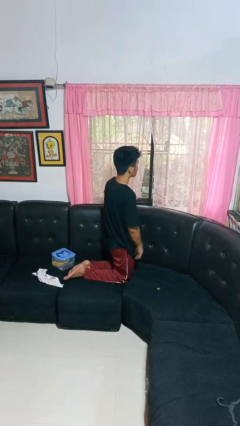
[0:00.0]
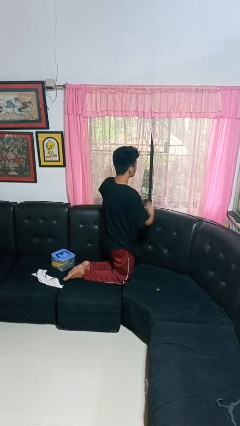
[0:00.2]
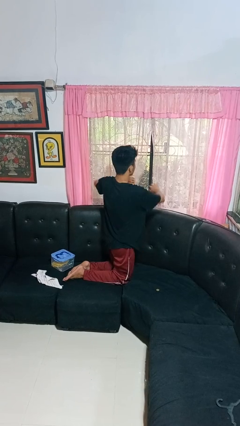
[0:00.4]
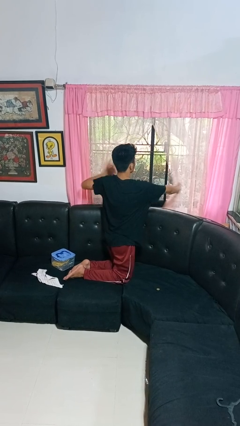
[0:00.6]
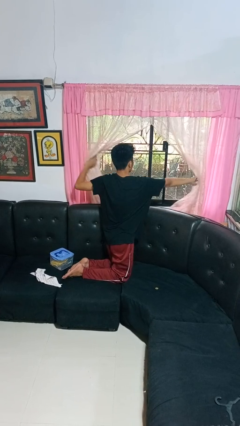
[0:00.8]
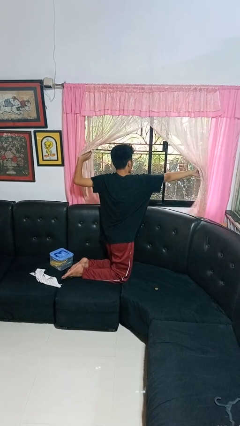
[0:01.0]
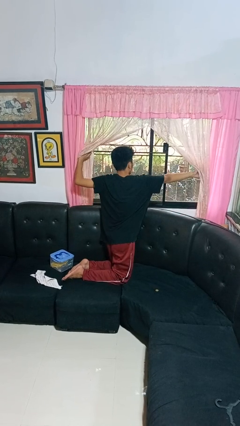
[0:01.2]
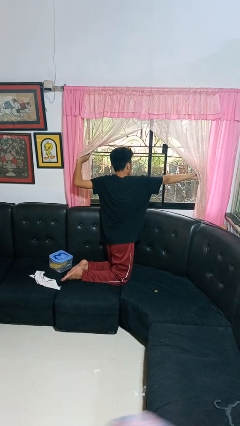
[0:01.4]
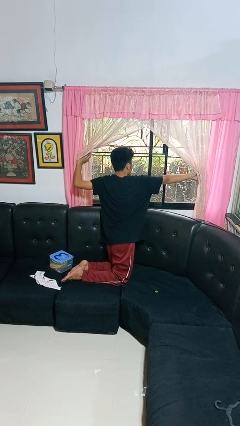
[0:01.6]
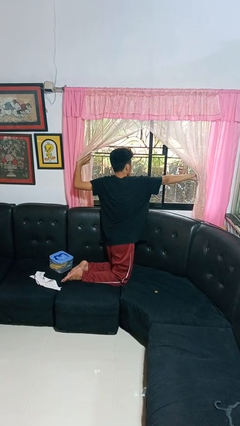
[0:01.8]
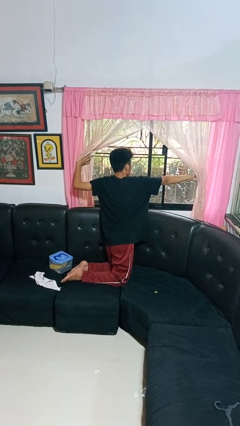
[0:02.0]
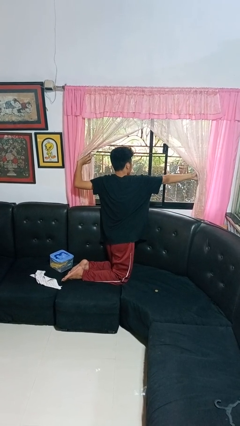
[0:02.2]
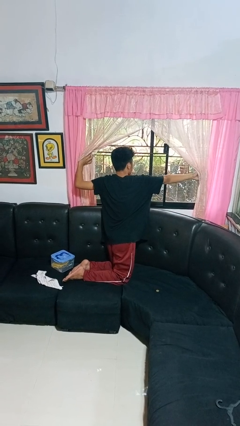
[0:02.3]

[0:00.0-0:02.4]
person opens curtains

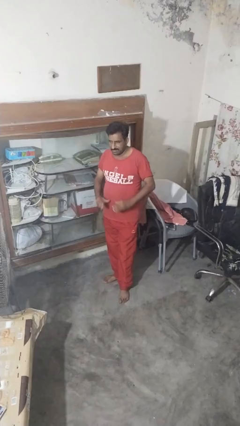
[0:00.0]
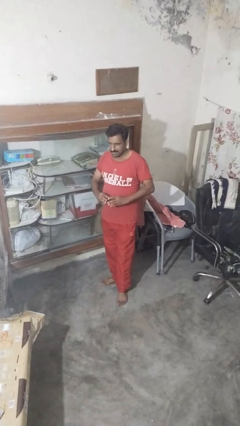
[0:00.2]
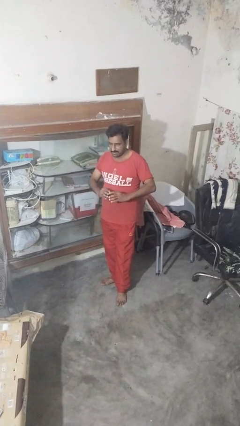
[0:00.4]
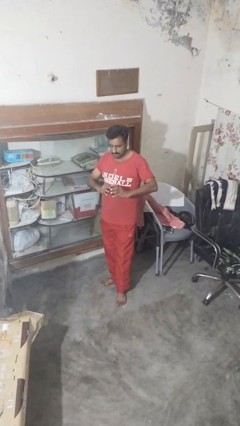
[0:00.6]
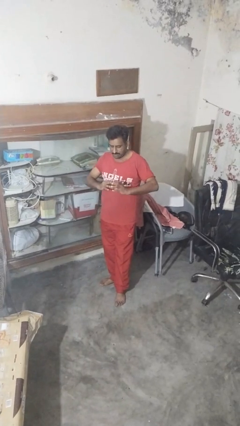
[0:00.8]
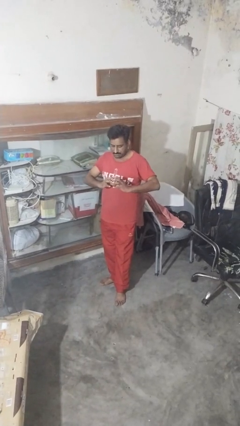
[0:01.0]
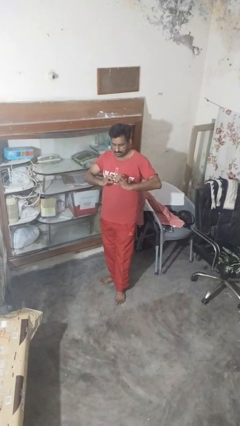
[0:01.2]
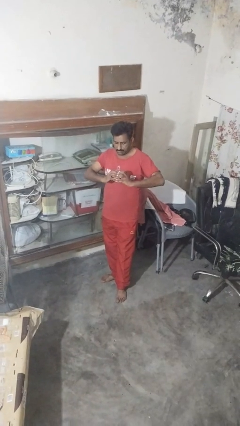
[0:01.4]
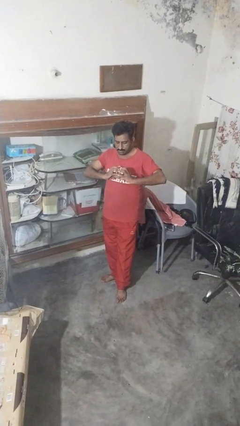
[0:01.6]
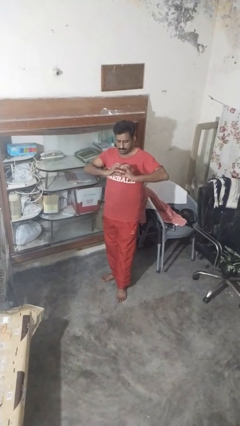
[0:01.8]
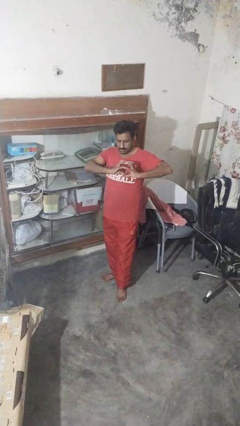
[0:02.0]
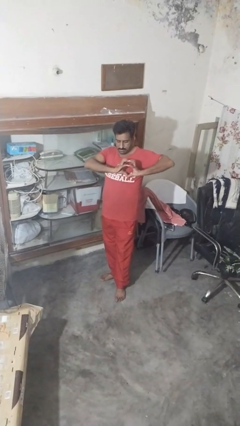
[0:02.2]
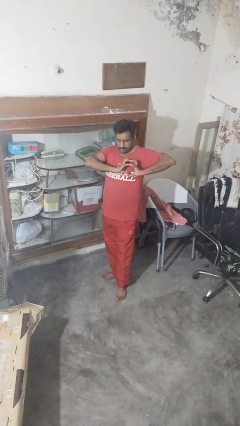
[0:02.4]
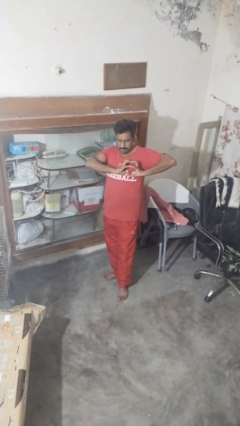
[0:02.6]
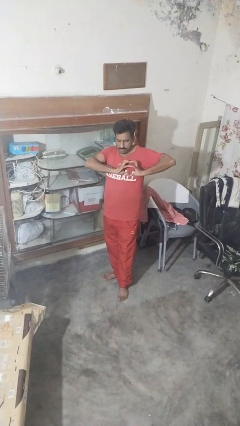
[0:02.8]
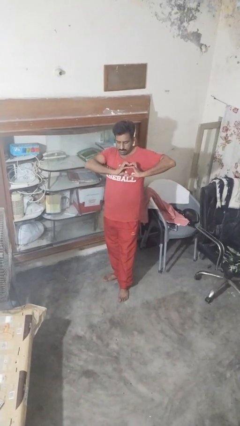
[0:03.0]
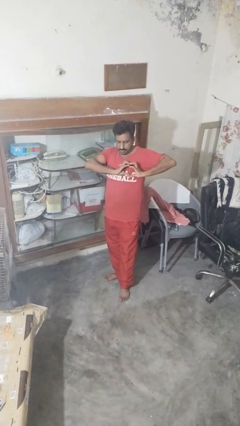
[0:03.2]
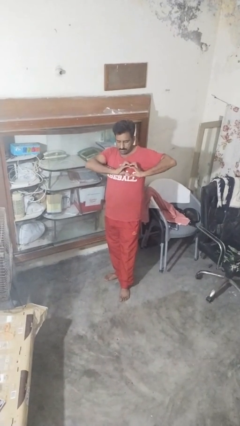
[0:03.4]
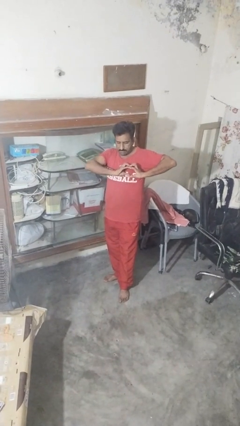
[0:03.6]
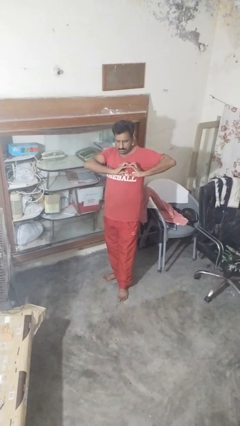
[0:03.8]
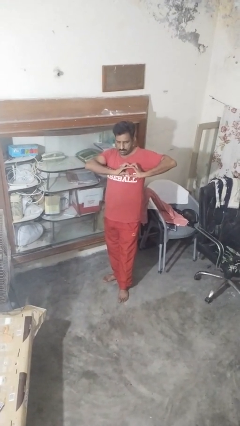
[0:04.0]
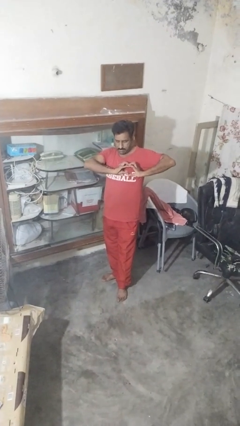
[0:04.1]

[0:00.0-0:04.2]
person gestures heart

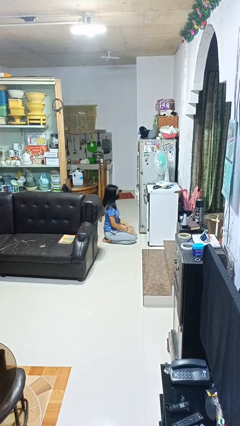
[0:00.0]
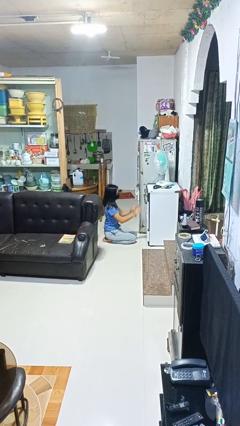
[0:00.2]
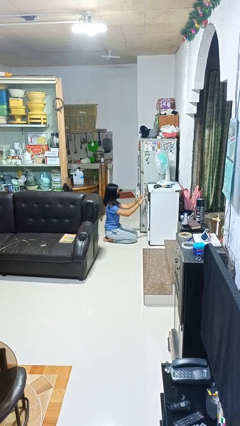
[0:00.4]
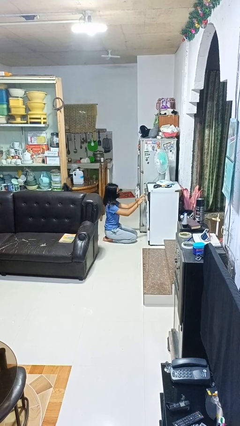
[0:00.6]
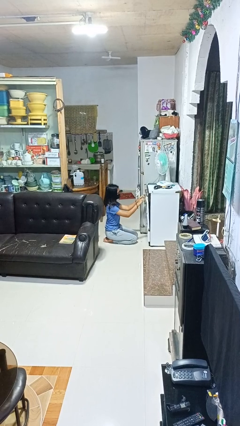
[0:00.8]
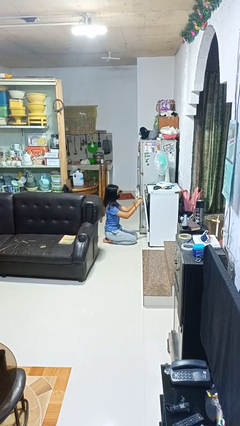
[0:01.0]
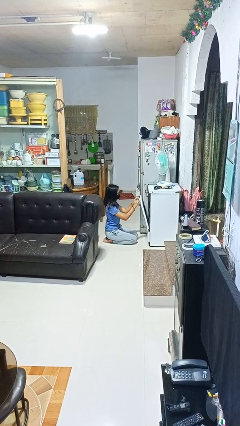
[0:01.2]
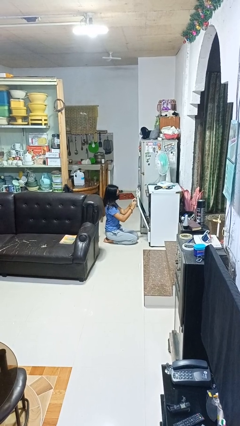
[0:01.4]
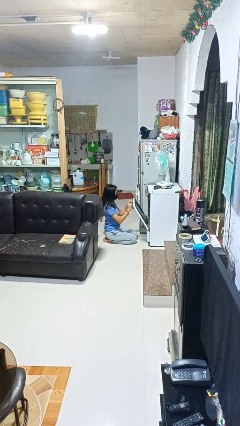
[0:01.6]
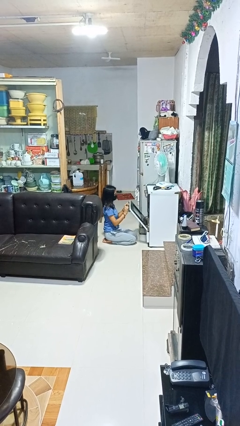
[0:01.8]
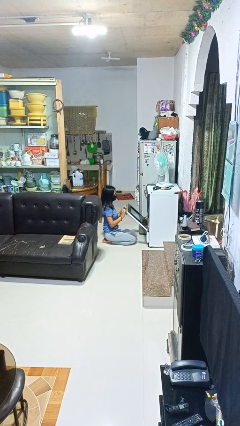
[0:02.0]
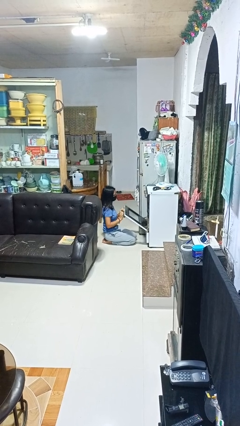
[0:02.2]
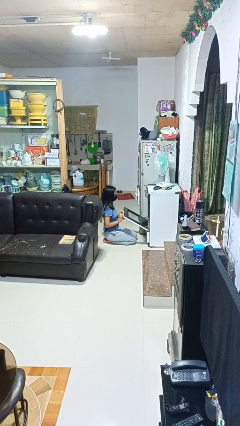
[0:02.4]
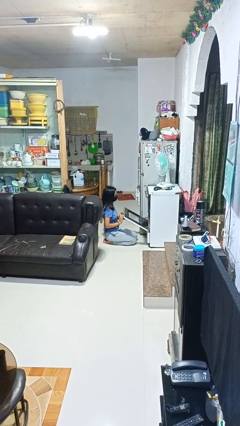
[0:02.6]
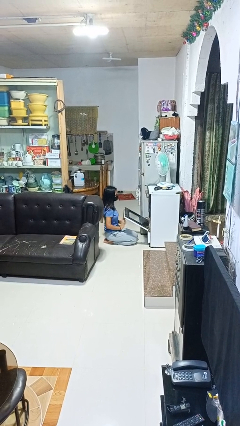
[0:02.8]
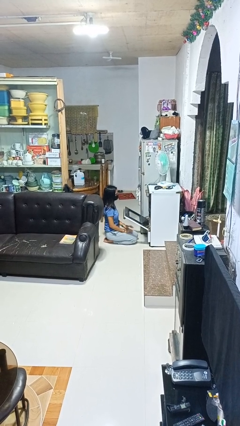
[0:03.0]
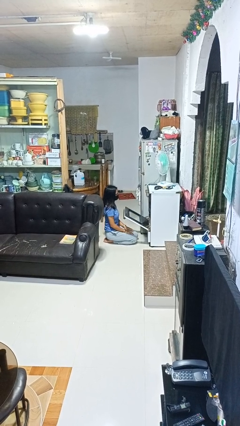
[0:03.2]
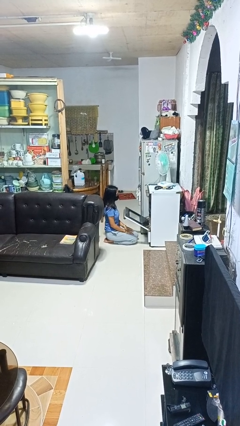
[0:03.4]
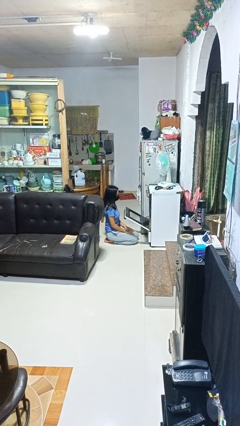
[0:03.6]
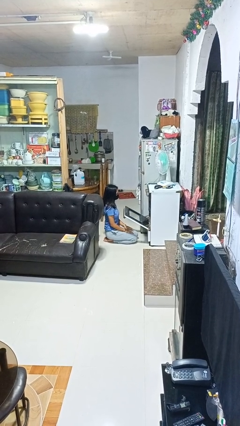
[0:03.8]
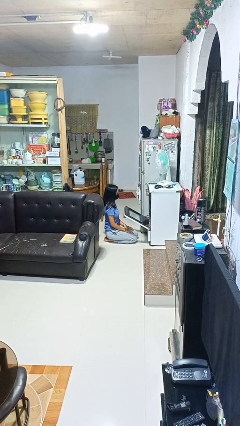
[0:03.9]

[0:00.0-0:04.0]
person opens oven door

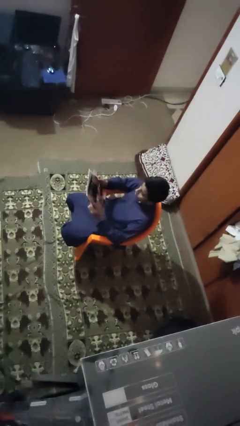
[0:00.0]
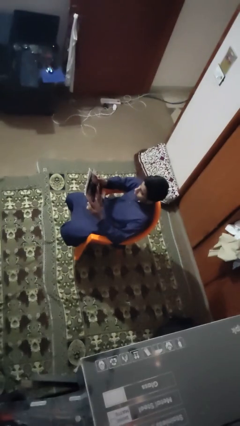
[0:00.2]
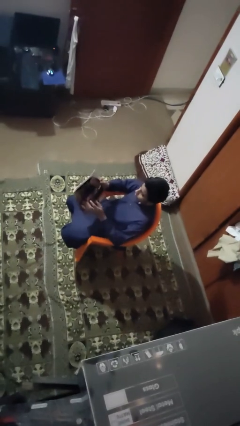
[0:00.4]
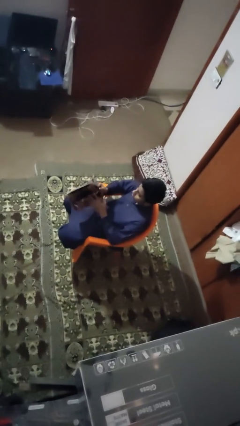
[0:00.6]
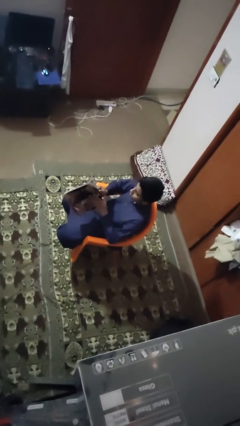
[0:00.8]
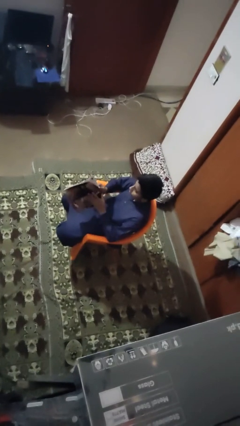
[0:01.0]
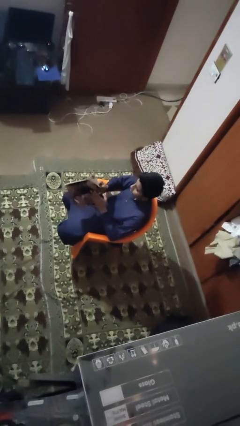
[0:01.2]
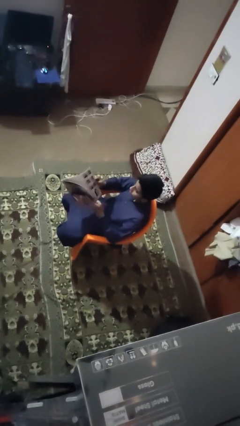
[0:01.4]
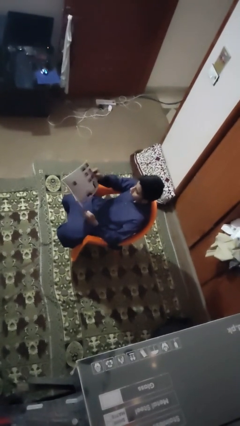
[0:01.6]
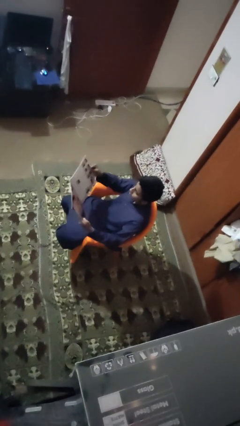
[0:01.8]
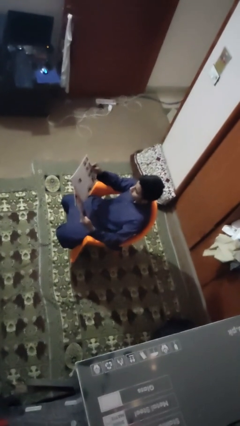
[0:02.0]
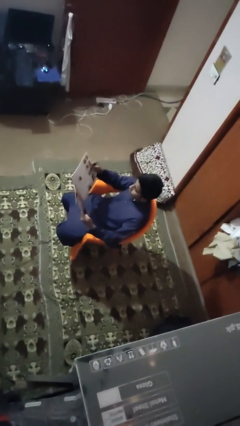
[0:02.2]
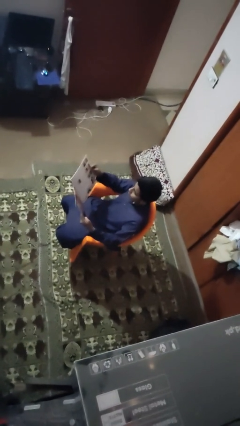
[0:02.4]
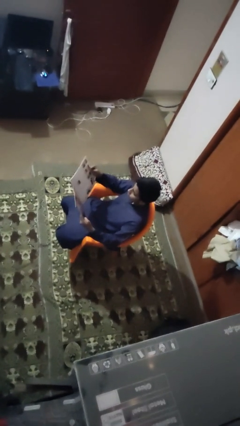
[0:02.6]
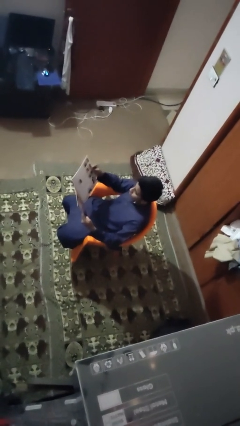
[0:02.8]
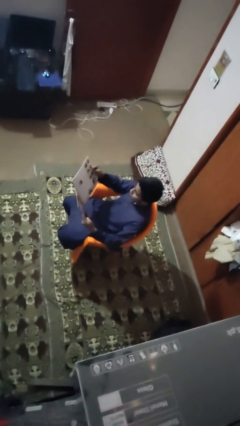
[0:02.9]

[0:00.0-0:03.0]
person reads magazine

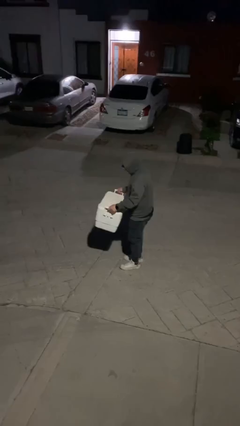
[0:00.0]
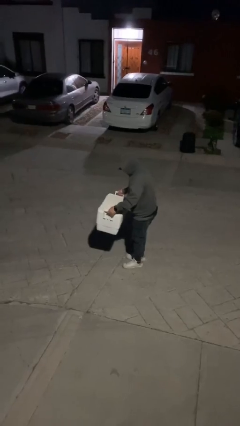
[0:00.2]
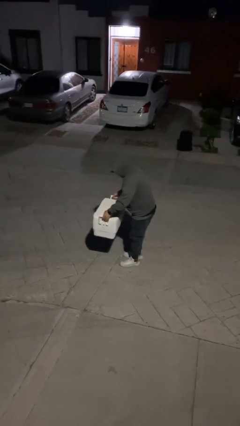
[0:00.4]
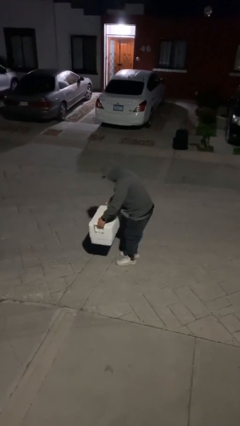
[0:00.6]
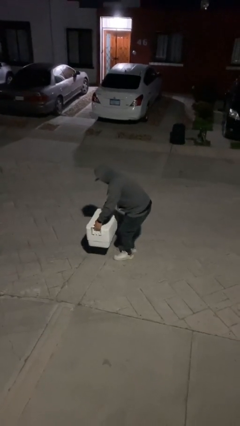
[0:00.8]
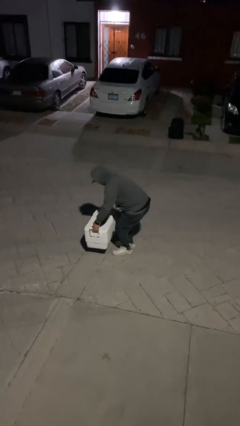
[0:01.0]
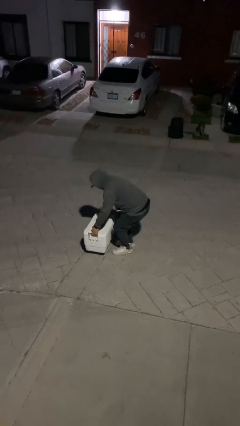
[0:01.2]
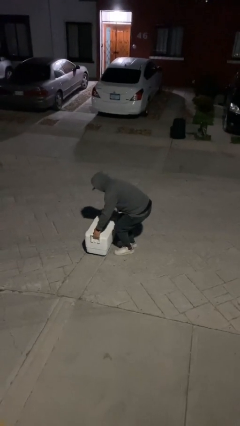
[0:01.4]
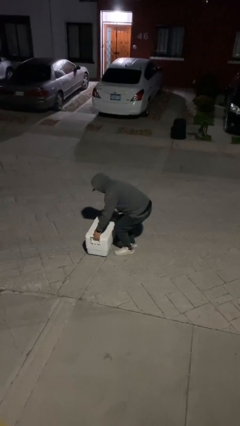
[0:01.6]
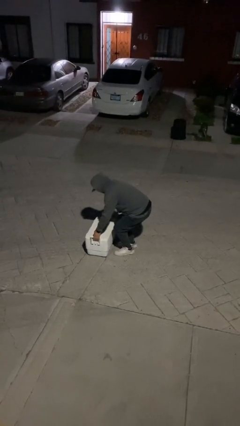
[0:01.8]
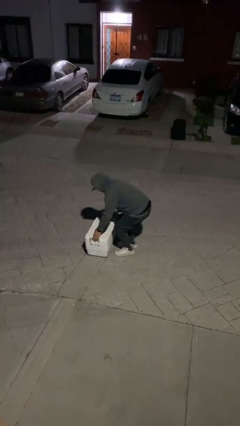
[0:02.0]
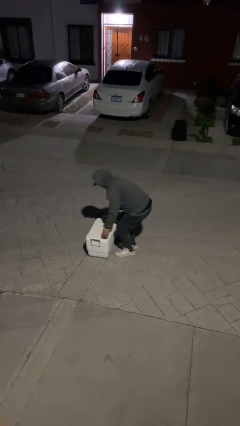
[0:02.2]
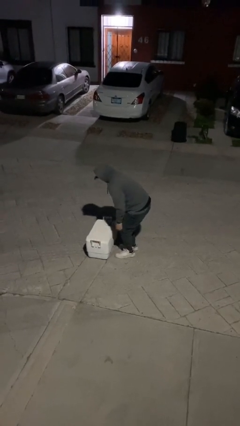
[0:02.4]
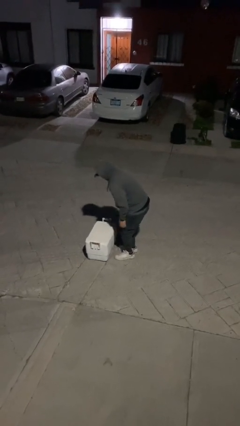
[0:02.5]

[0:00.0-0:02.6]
person puts down object on floor

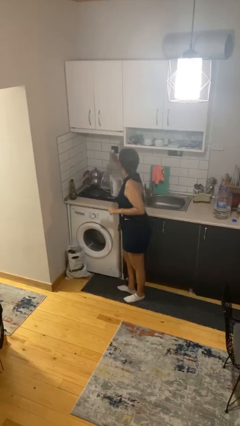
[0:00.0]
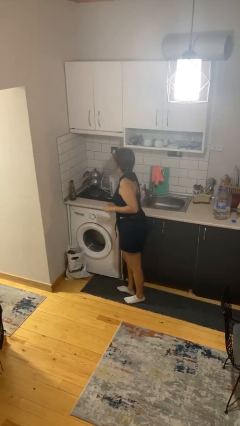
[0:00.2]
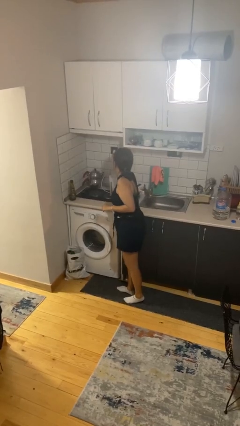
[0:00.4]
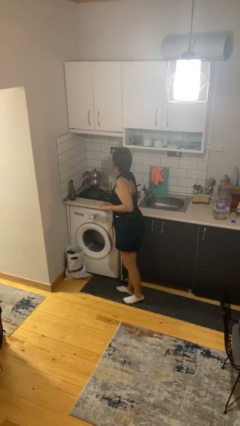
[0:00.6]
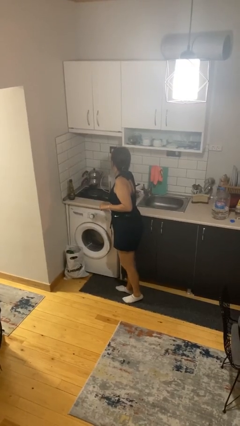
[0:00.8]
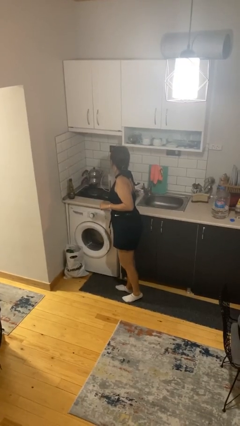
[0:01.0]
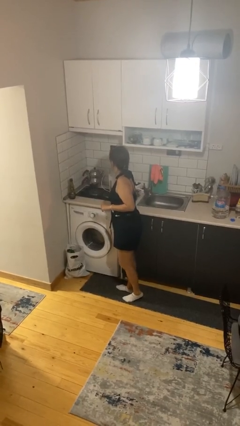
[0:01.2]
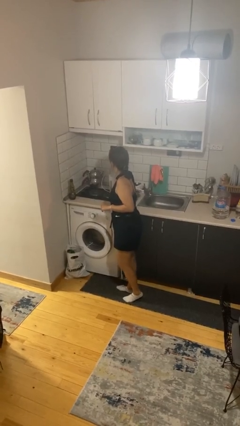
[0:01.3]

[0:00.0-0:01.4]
person plugs into electrical socket

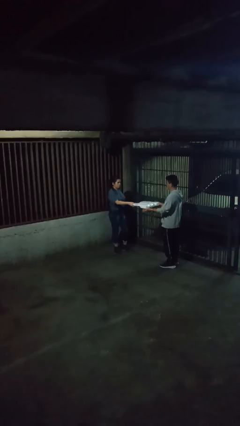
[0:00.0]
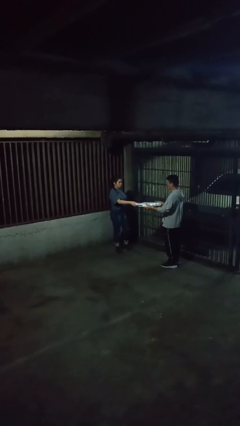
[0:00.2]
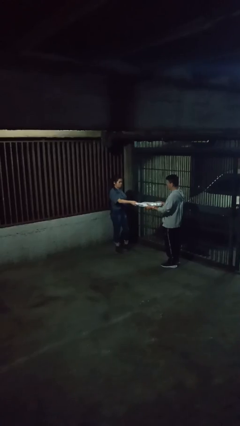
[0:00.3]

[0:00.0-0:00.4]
person transfers object to person
